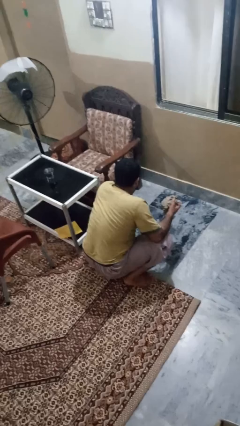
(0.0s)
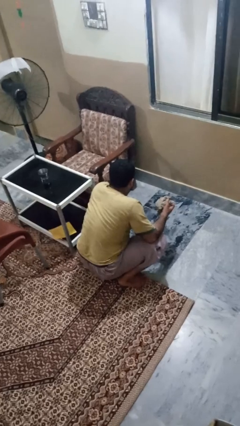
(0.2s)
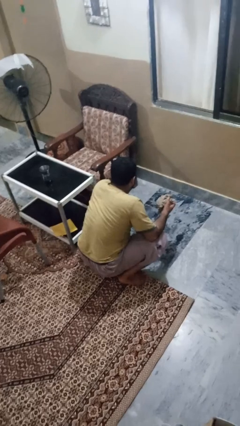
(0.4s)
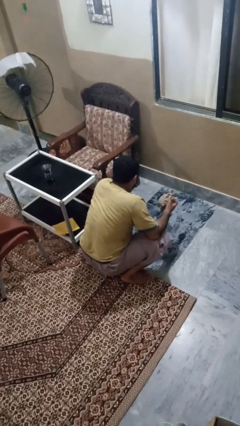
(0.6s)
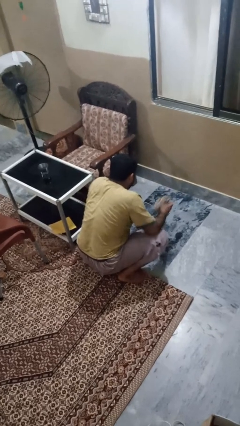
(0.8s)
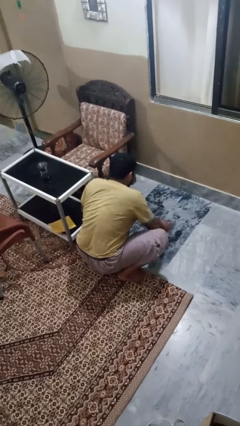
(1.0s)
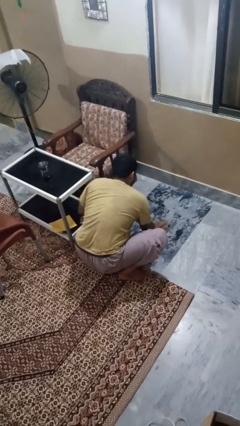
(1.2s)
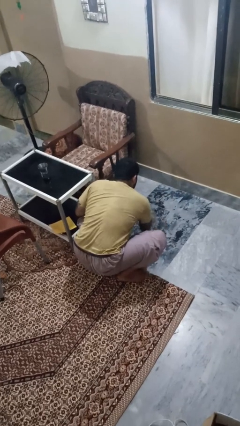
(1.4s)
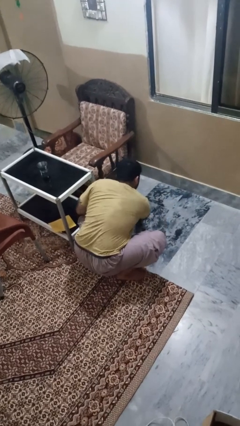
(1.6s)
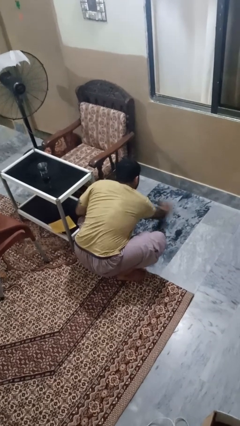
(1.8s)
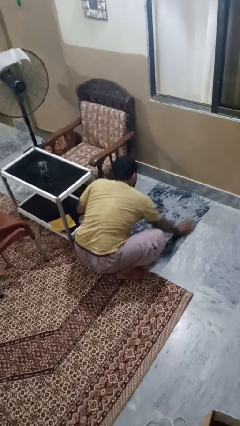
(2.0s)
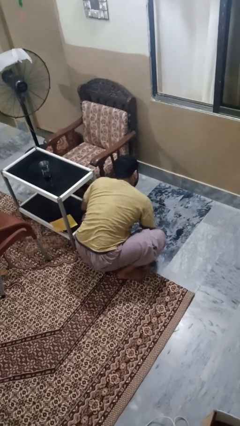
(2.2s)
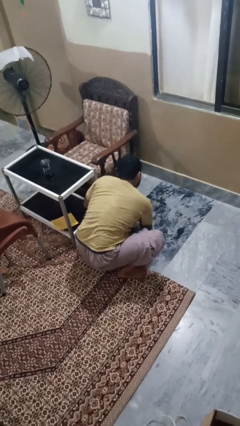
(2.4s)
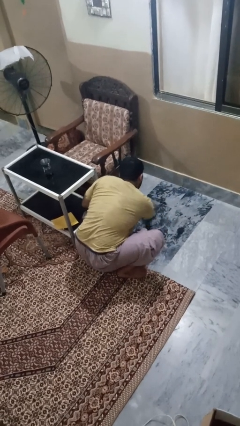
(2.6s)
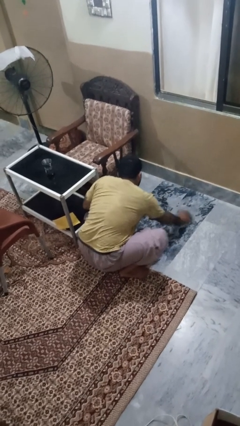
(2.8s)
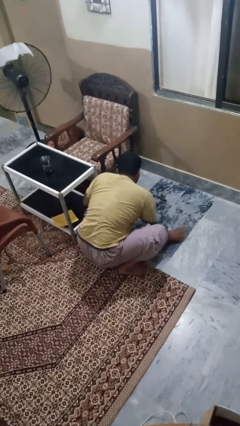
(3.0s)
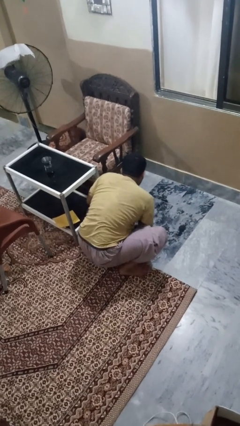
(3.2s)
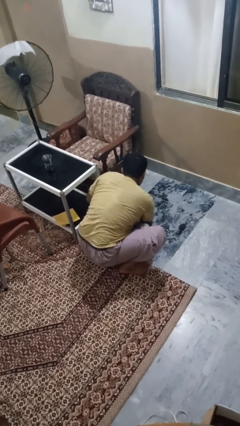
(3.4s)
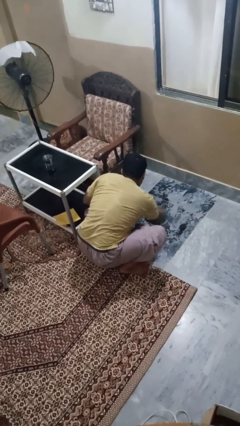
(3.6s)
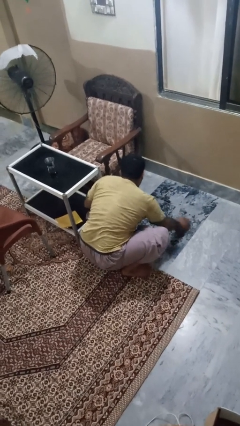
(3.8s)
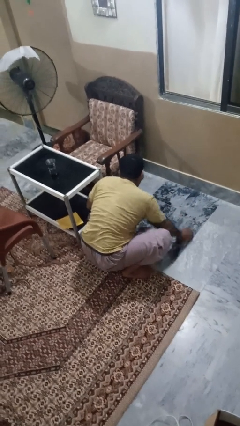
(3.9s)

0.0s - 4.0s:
person mops

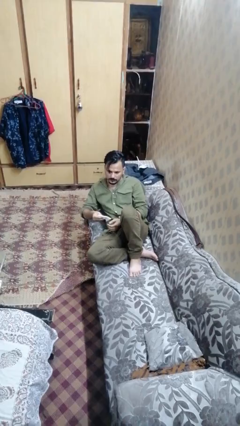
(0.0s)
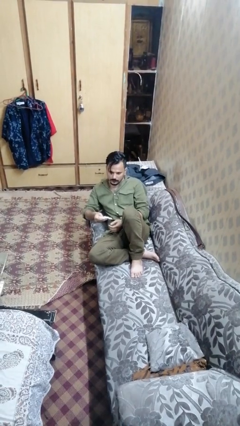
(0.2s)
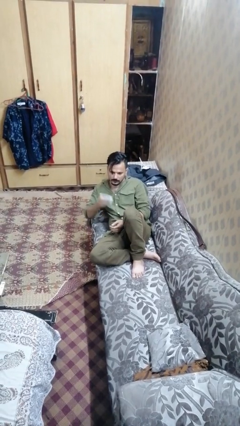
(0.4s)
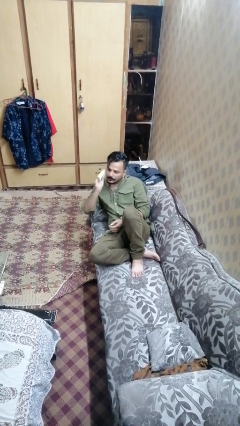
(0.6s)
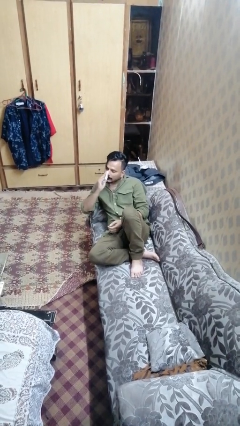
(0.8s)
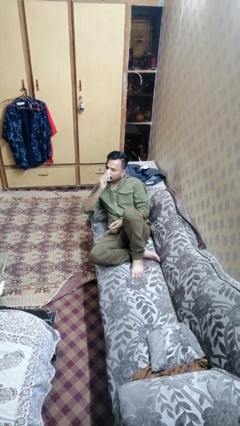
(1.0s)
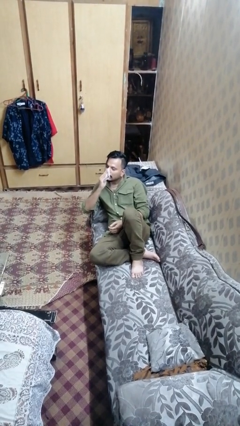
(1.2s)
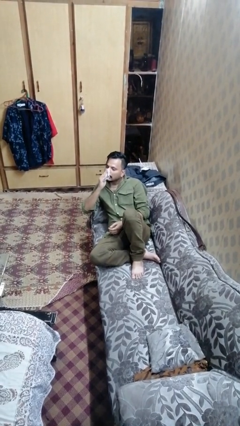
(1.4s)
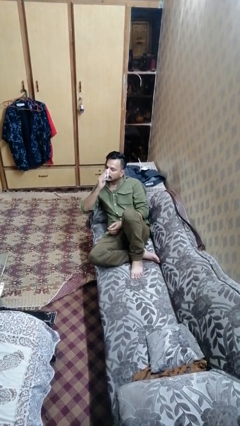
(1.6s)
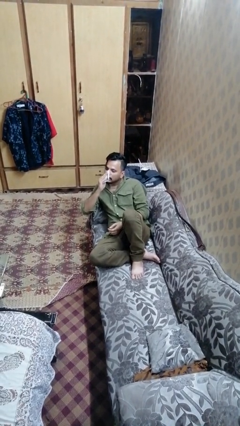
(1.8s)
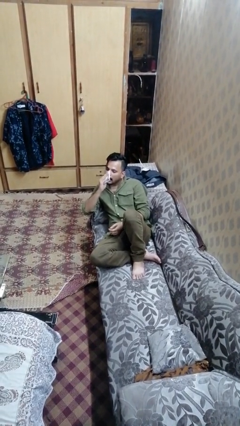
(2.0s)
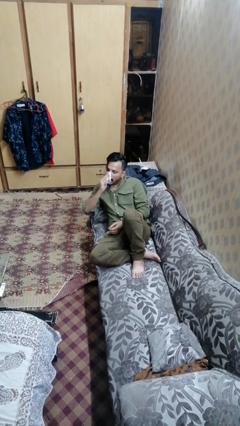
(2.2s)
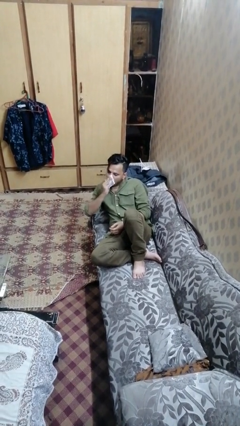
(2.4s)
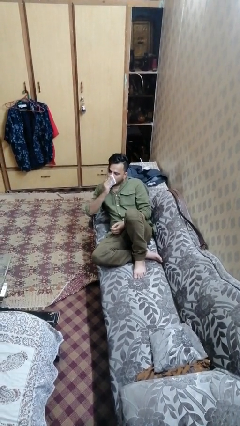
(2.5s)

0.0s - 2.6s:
person blows nose

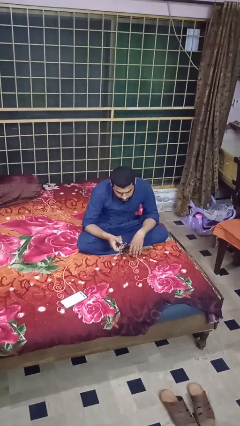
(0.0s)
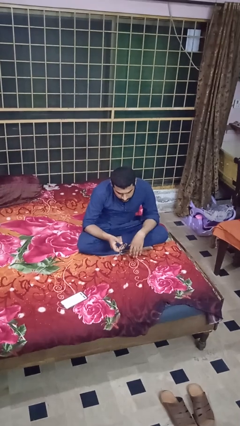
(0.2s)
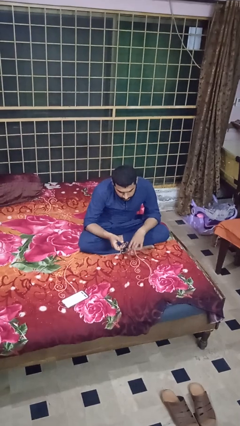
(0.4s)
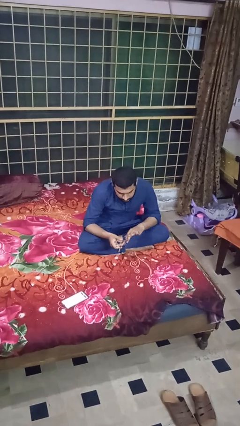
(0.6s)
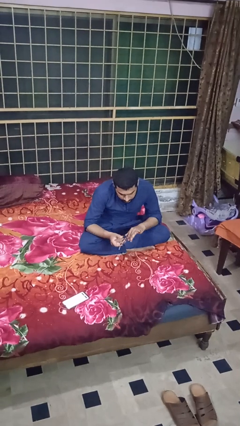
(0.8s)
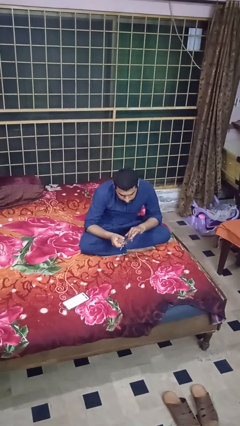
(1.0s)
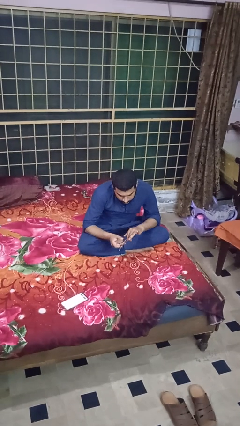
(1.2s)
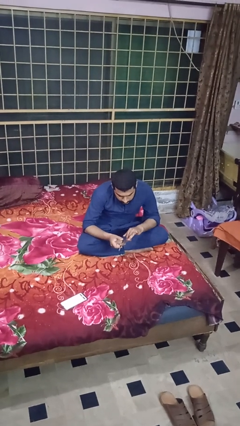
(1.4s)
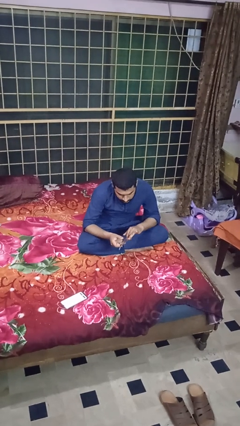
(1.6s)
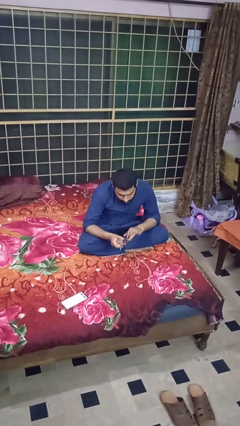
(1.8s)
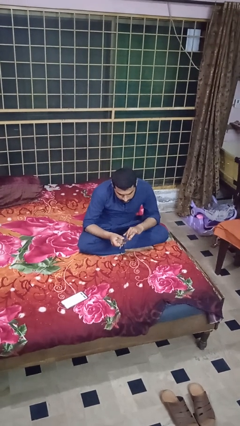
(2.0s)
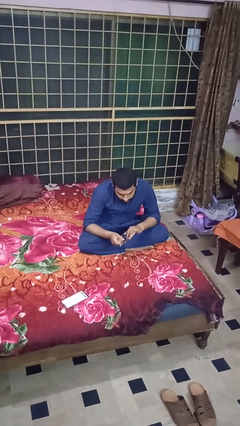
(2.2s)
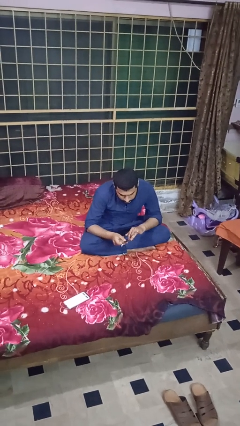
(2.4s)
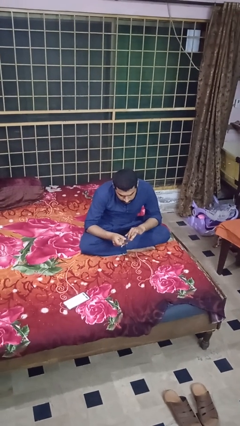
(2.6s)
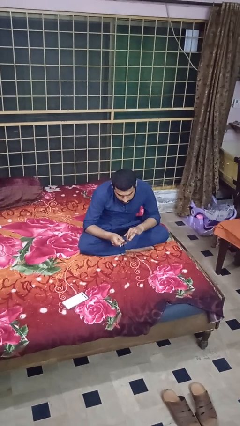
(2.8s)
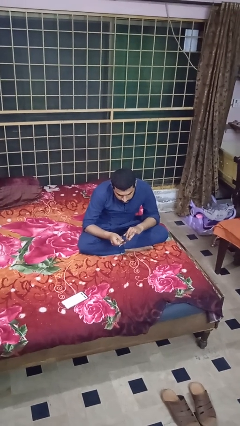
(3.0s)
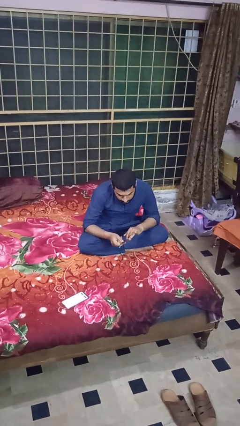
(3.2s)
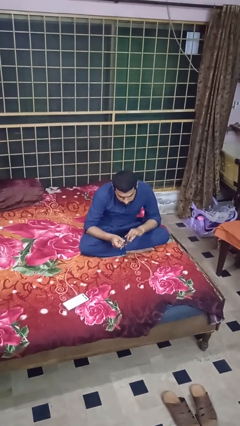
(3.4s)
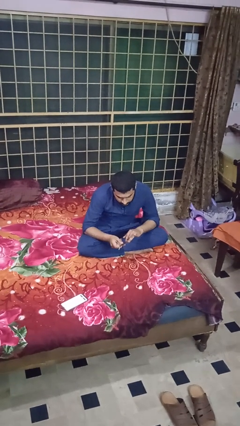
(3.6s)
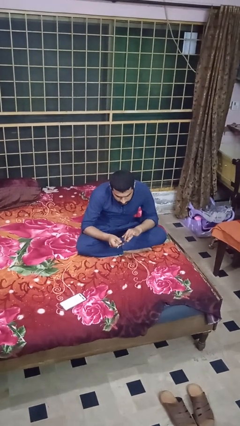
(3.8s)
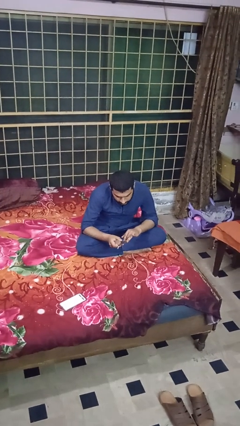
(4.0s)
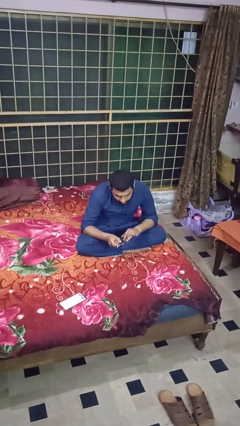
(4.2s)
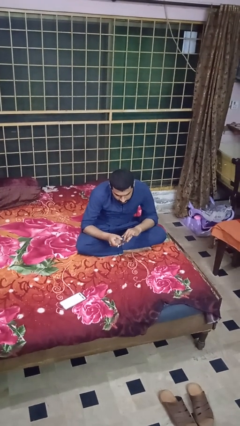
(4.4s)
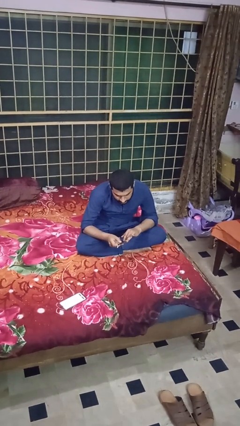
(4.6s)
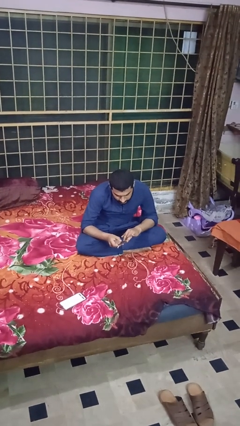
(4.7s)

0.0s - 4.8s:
person clips fingernails

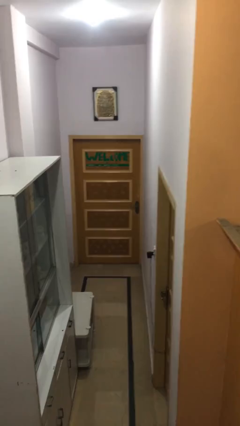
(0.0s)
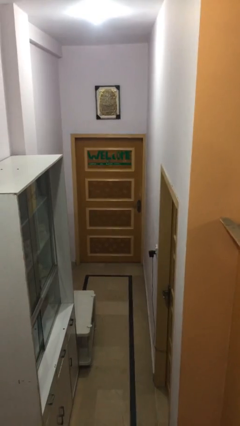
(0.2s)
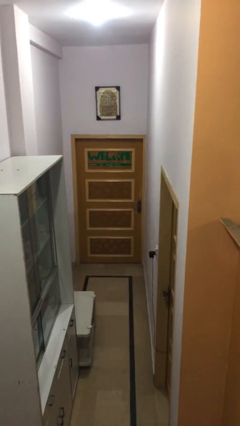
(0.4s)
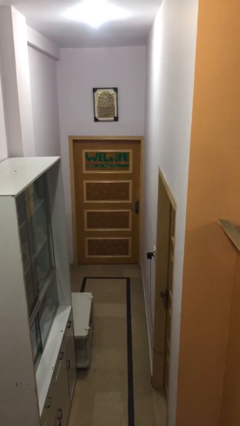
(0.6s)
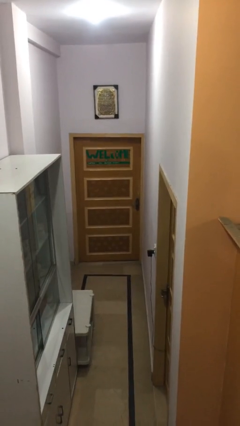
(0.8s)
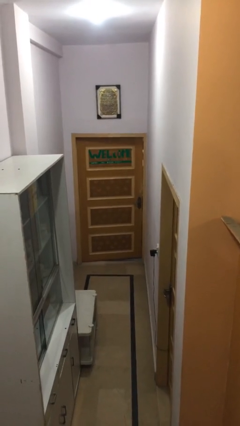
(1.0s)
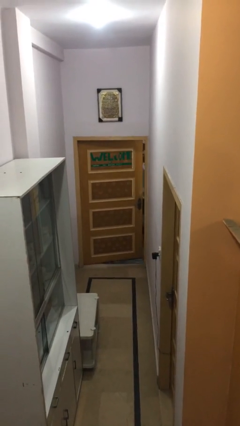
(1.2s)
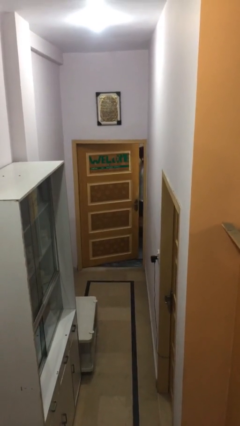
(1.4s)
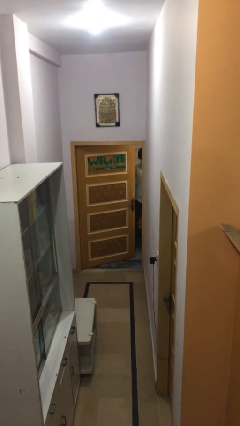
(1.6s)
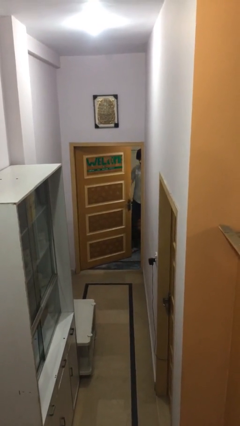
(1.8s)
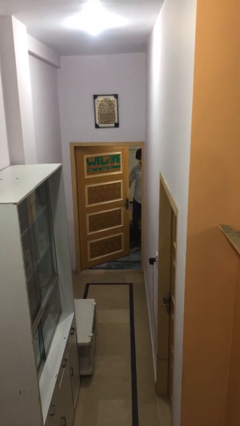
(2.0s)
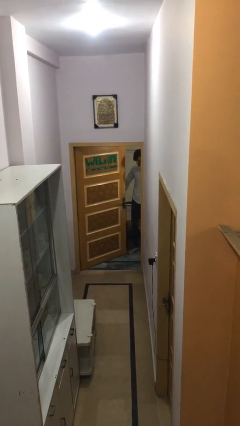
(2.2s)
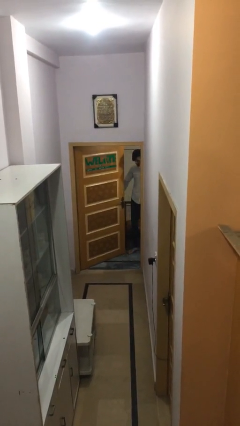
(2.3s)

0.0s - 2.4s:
person opens facility door

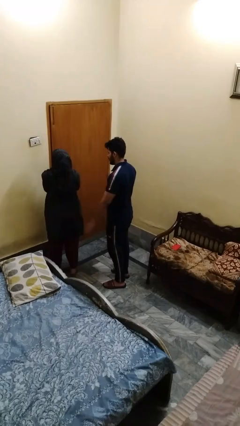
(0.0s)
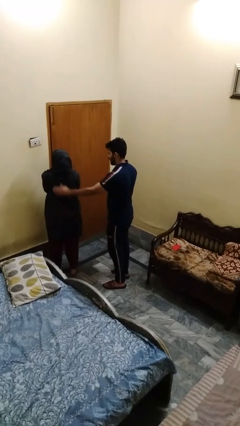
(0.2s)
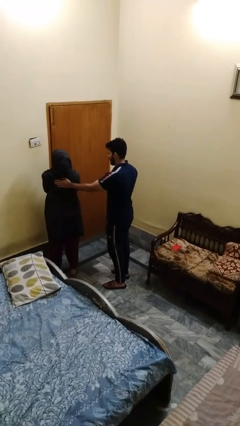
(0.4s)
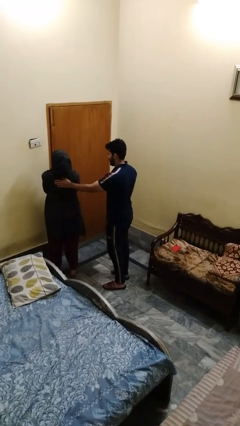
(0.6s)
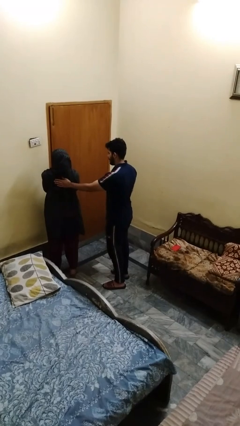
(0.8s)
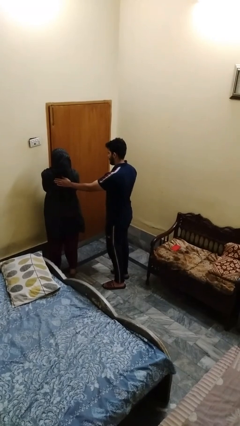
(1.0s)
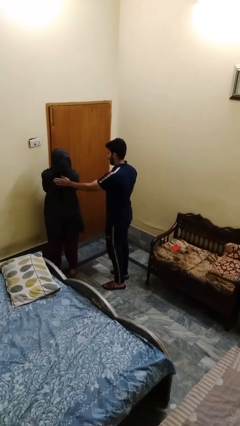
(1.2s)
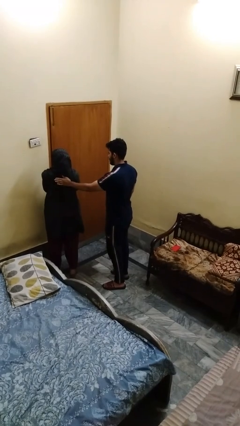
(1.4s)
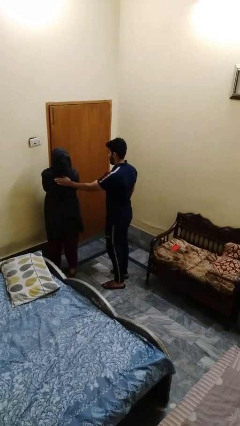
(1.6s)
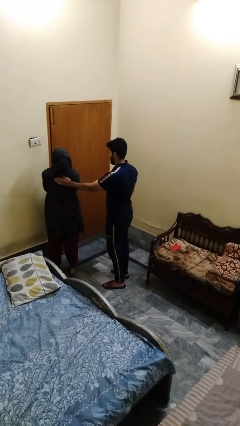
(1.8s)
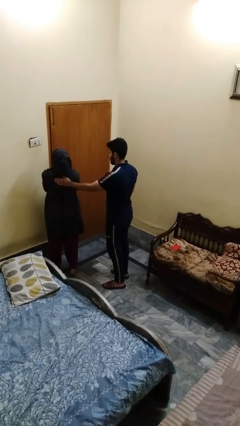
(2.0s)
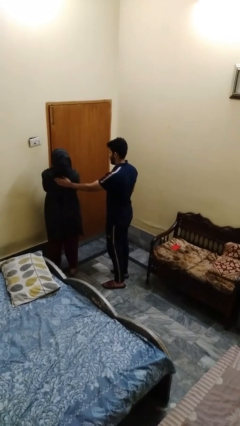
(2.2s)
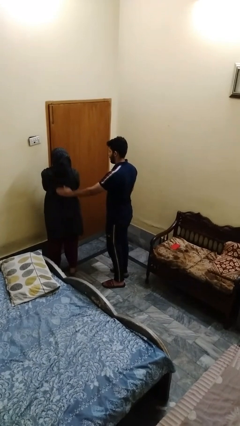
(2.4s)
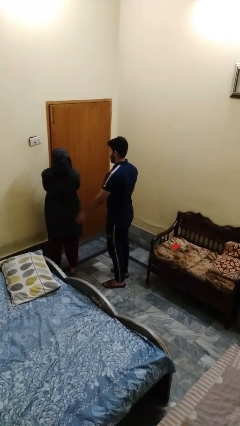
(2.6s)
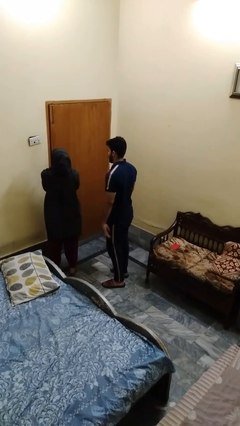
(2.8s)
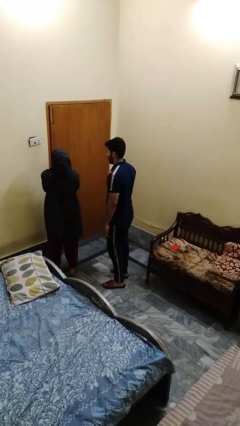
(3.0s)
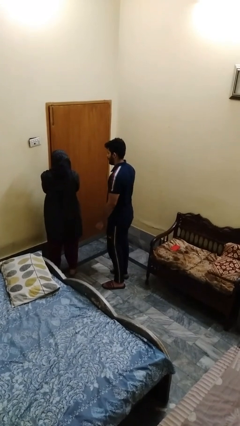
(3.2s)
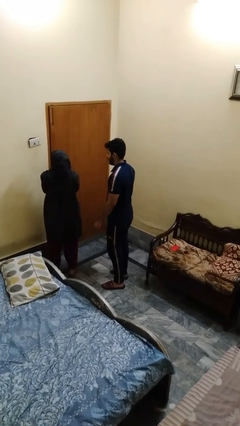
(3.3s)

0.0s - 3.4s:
person touches back of person

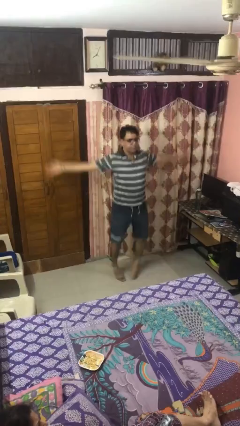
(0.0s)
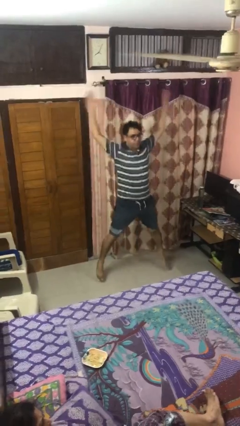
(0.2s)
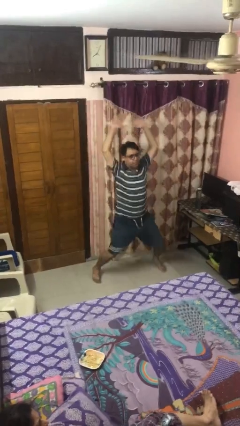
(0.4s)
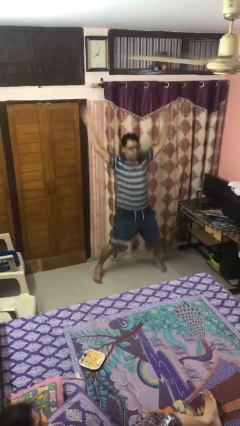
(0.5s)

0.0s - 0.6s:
person exercises with jumping jacks
